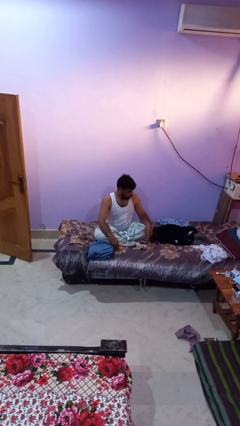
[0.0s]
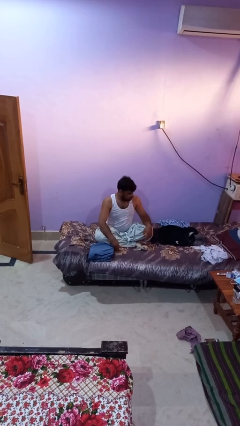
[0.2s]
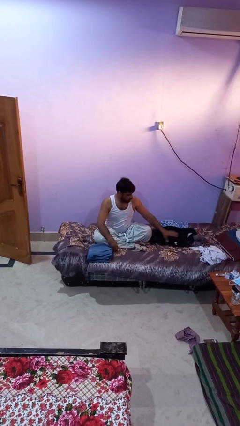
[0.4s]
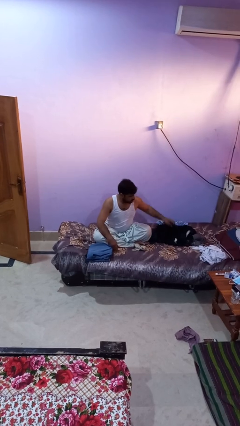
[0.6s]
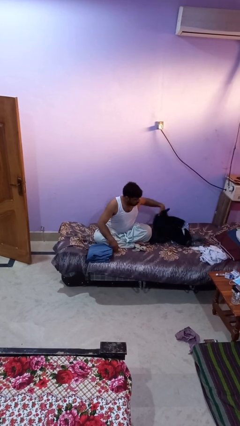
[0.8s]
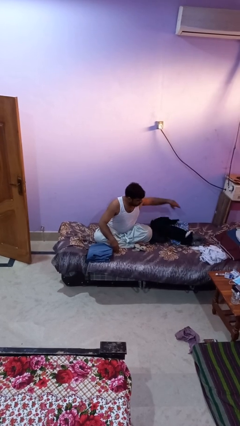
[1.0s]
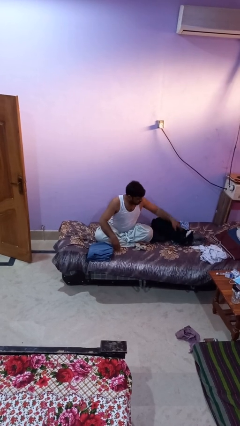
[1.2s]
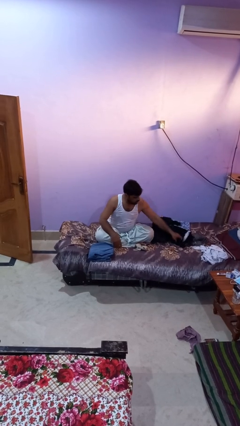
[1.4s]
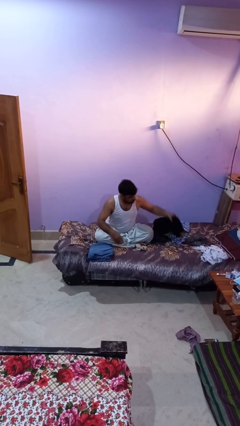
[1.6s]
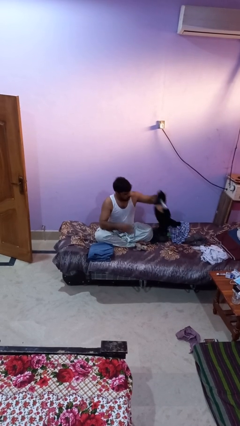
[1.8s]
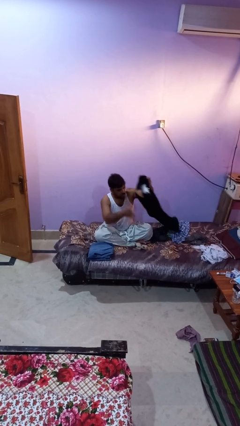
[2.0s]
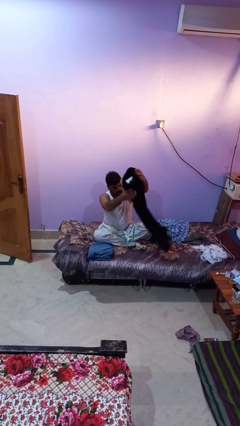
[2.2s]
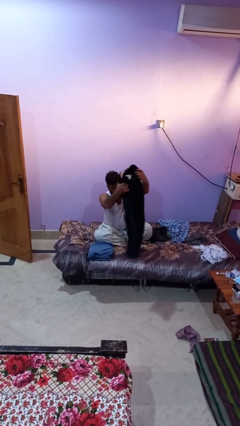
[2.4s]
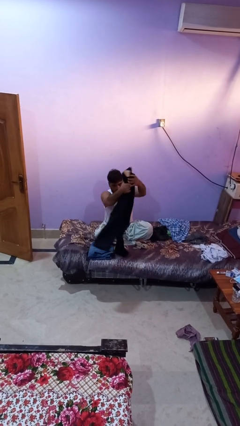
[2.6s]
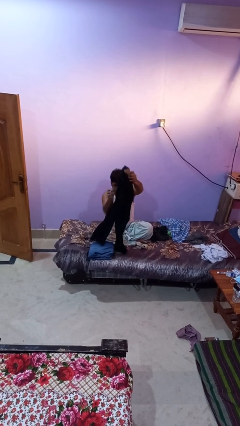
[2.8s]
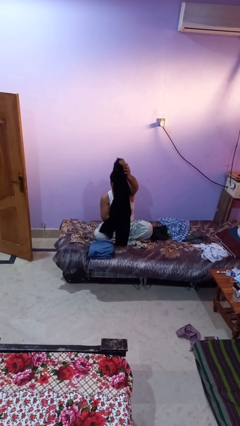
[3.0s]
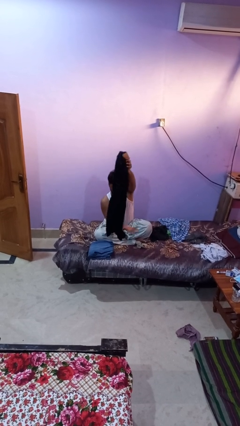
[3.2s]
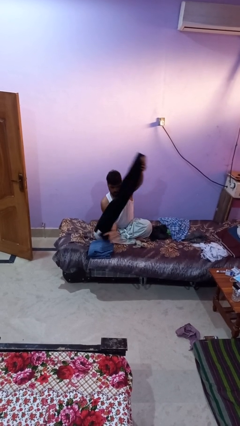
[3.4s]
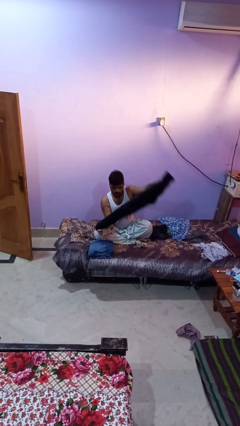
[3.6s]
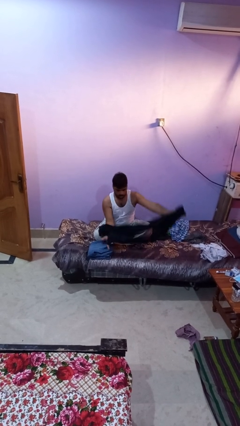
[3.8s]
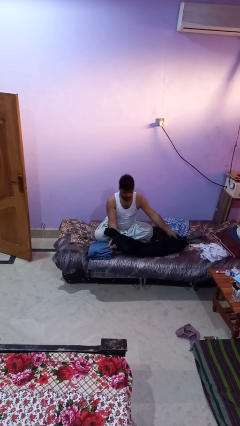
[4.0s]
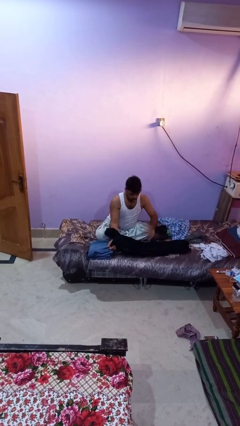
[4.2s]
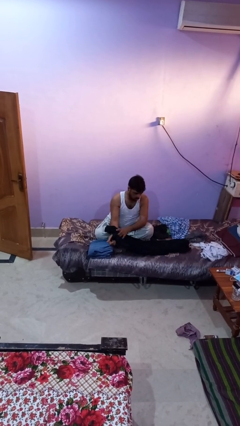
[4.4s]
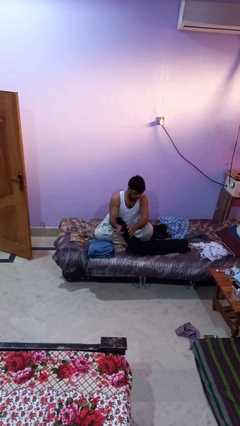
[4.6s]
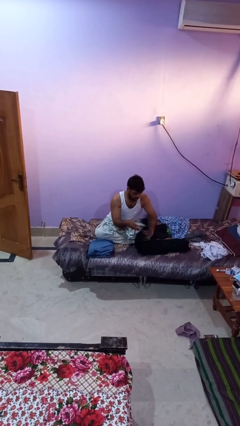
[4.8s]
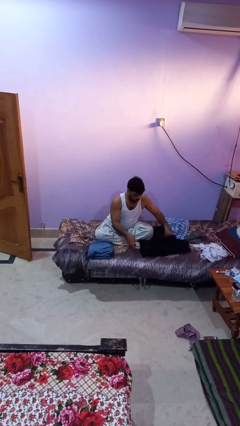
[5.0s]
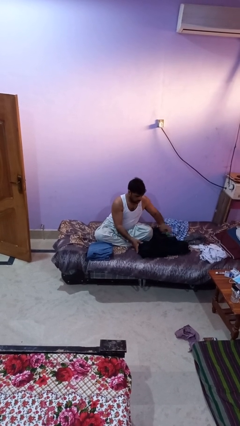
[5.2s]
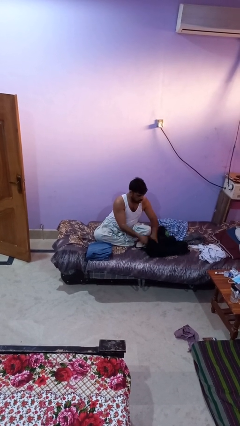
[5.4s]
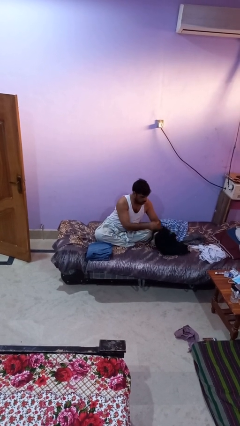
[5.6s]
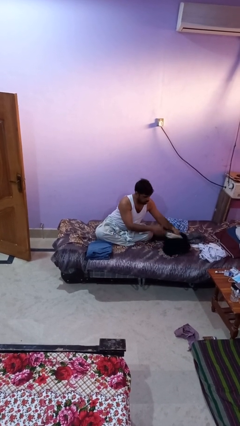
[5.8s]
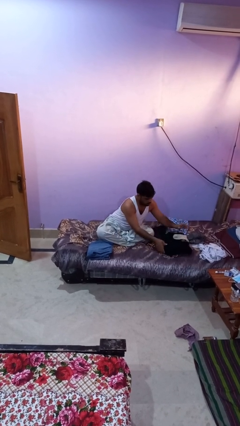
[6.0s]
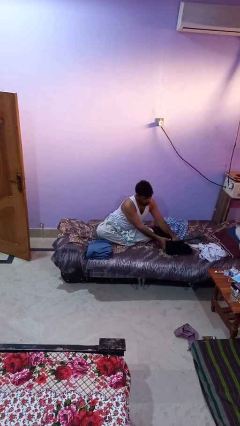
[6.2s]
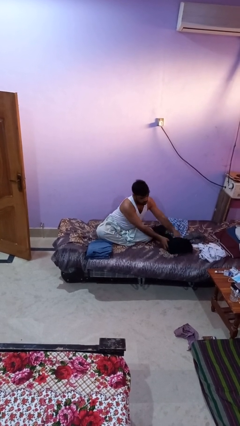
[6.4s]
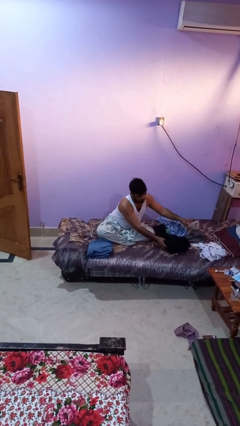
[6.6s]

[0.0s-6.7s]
person folds pants

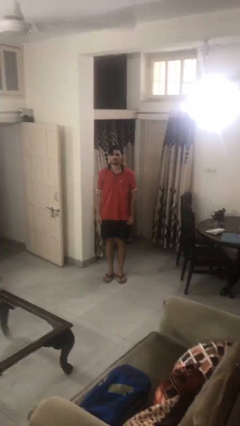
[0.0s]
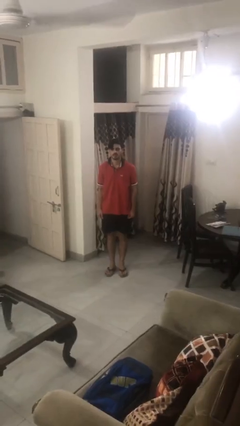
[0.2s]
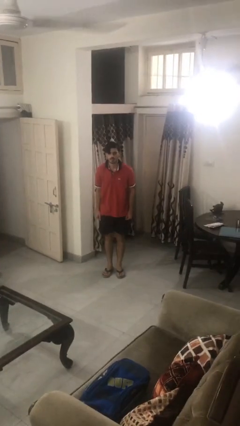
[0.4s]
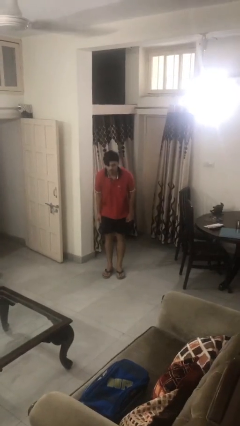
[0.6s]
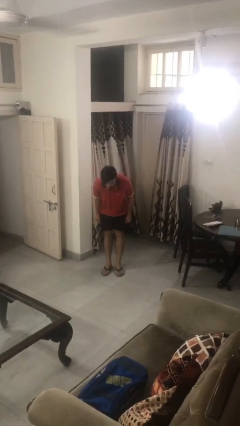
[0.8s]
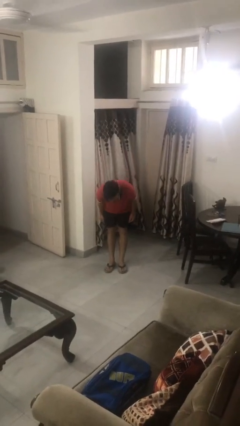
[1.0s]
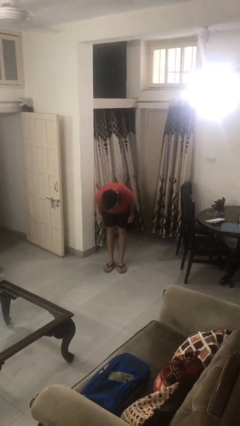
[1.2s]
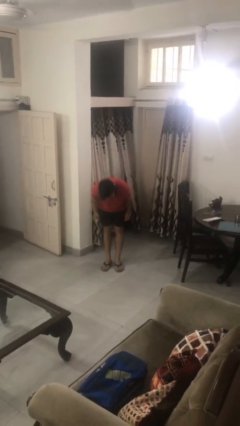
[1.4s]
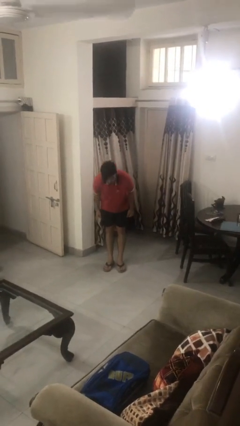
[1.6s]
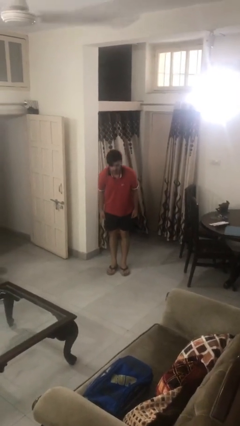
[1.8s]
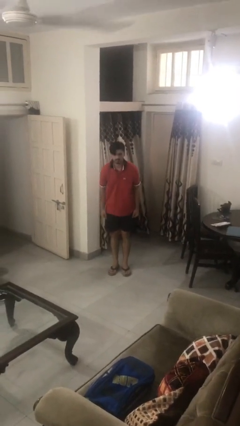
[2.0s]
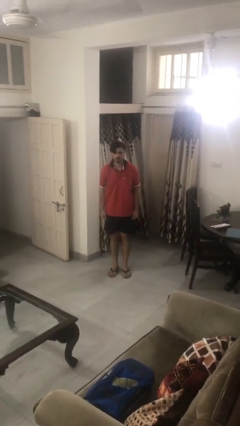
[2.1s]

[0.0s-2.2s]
person bows

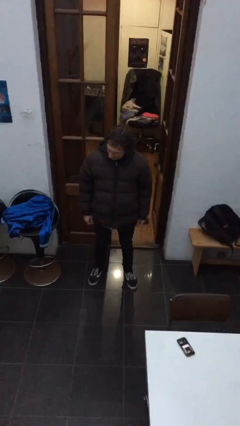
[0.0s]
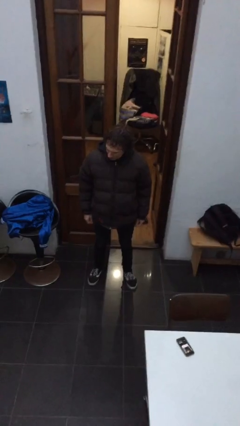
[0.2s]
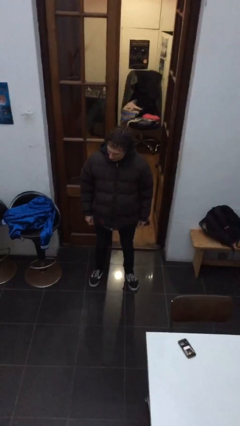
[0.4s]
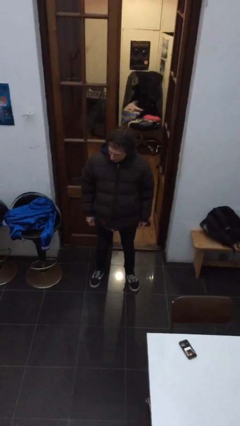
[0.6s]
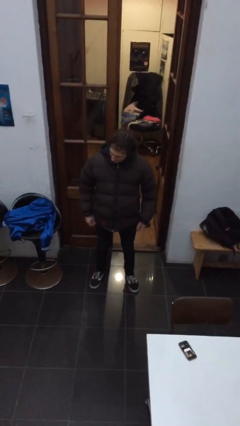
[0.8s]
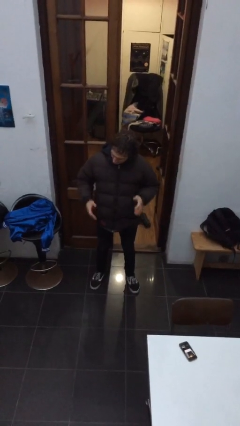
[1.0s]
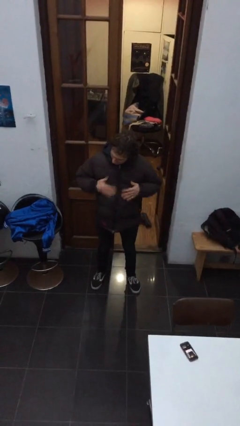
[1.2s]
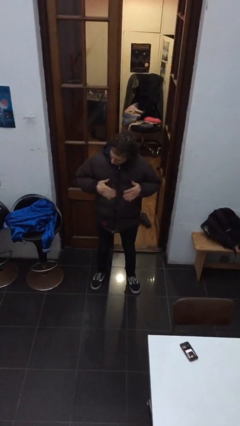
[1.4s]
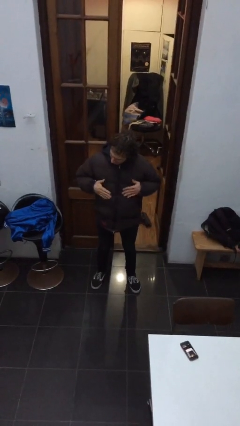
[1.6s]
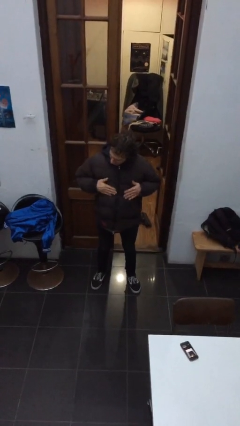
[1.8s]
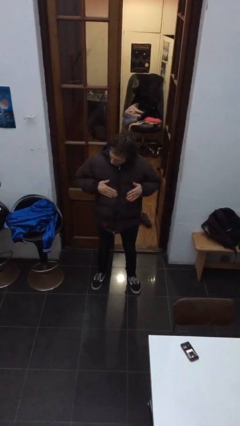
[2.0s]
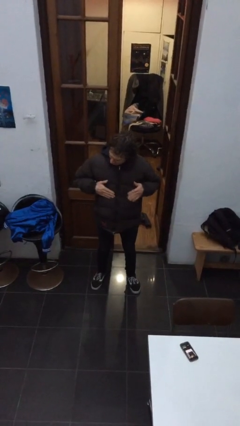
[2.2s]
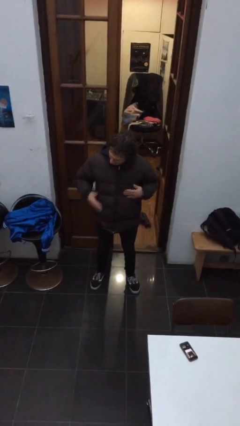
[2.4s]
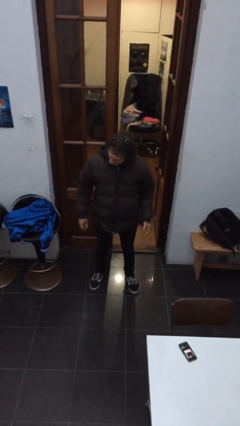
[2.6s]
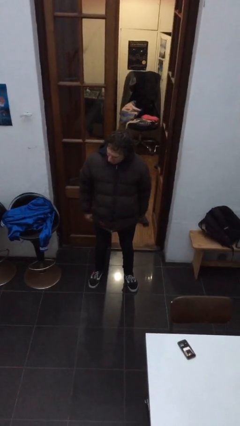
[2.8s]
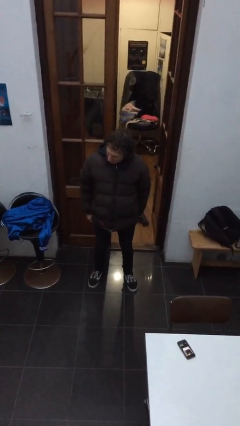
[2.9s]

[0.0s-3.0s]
person drums on chest

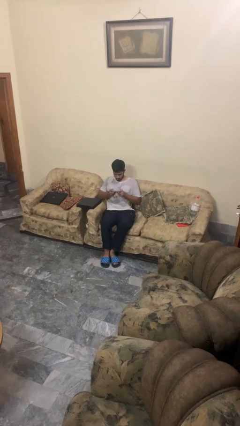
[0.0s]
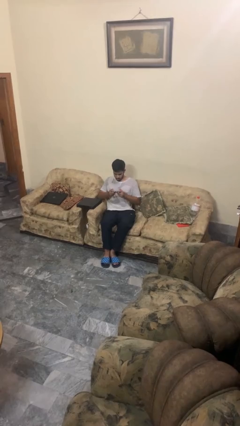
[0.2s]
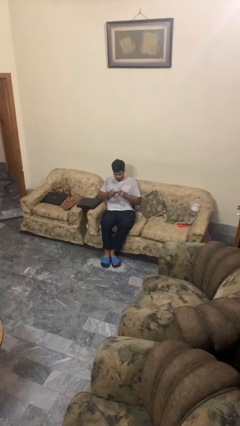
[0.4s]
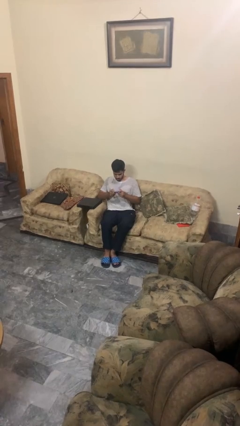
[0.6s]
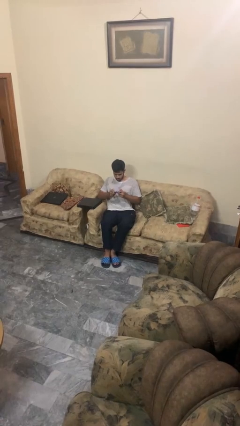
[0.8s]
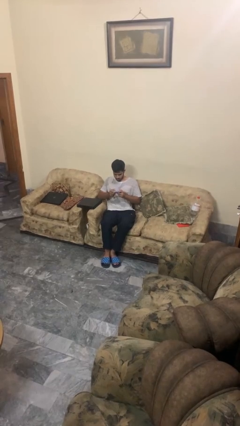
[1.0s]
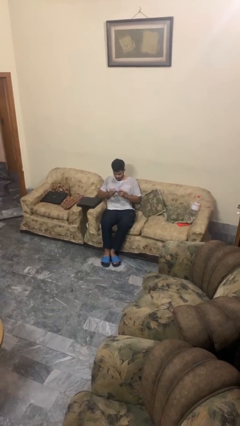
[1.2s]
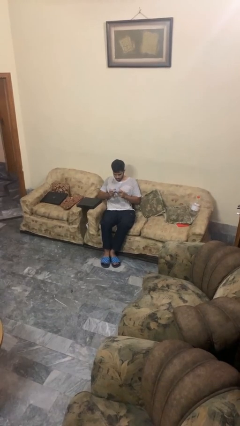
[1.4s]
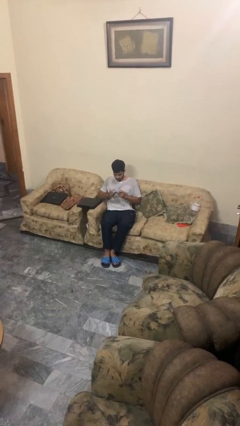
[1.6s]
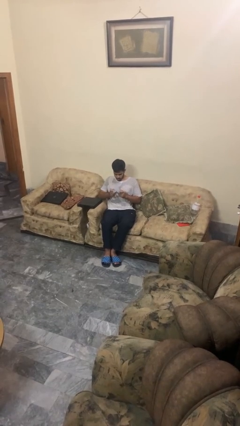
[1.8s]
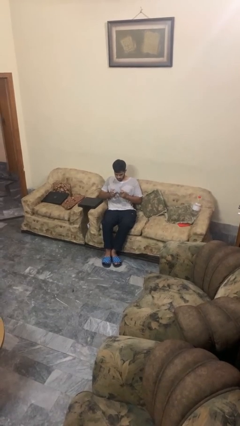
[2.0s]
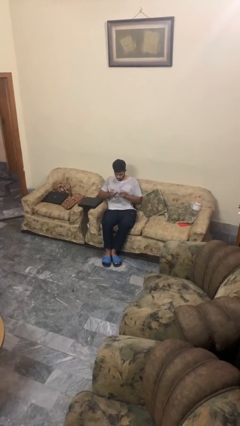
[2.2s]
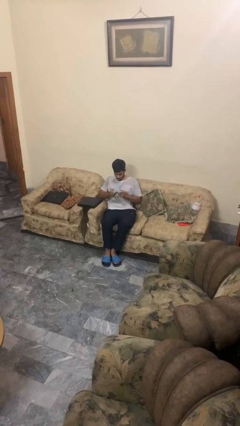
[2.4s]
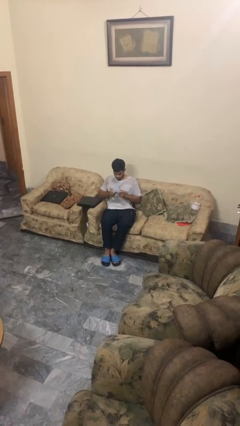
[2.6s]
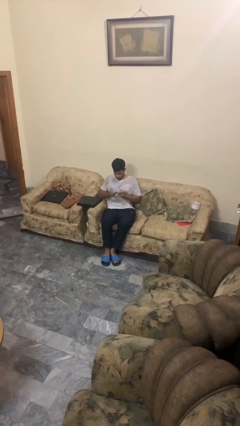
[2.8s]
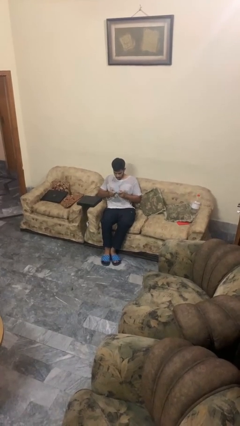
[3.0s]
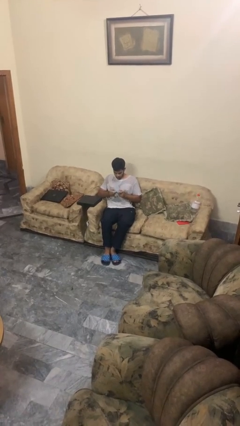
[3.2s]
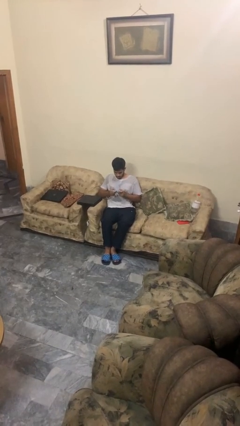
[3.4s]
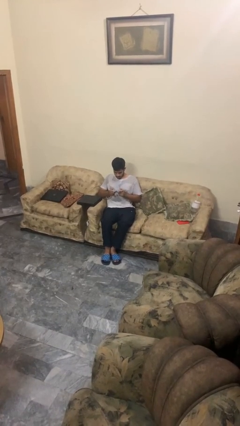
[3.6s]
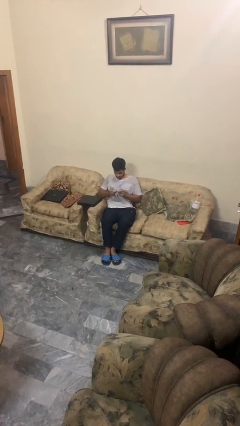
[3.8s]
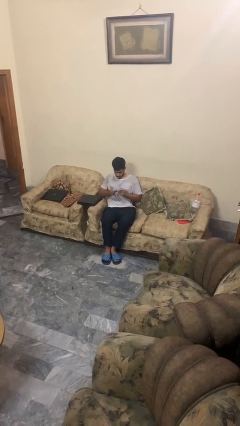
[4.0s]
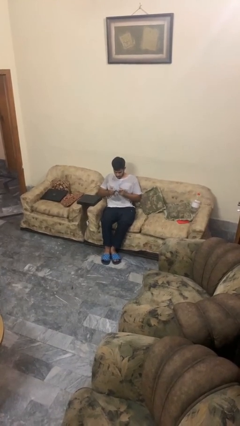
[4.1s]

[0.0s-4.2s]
person interacts with handheld game

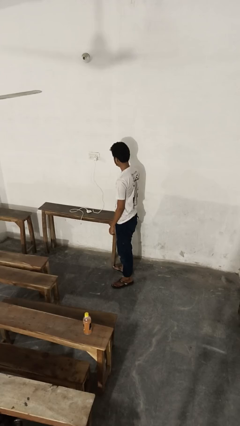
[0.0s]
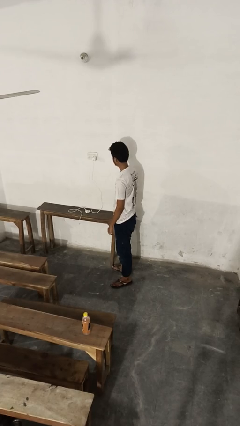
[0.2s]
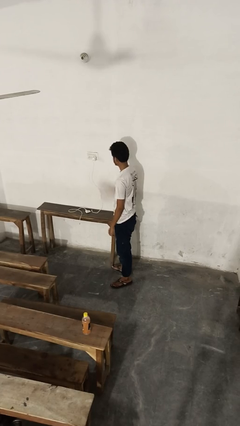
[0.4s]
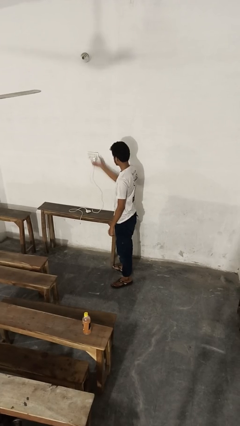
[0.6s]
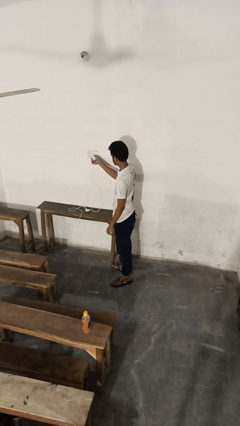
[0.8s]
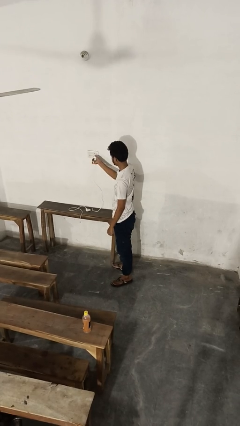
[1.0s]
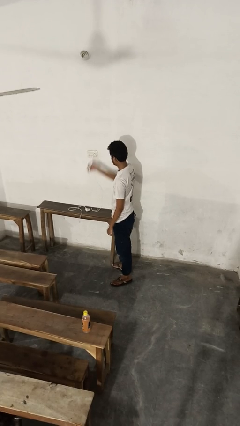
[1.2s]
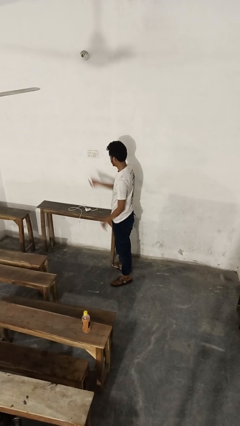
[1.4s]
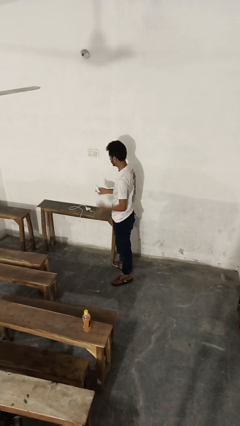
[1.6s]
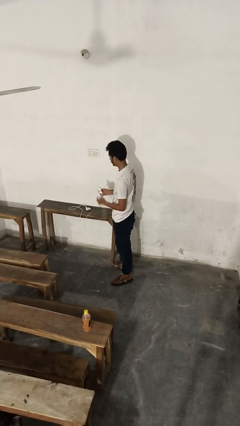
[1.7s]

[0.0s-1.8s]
person unplugs from electrical socket

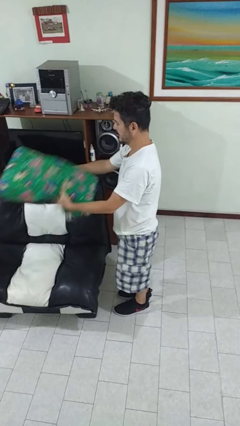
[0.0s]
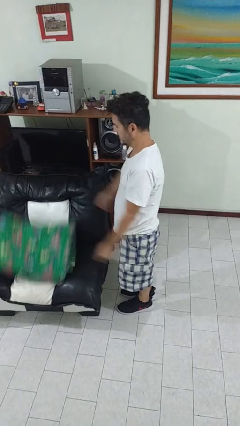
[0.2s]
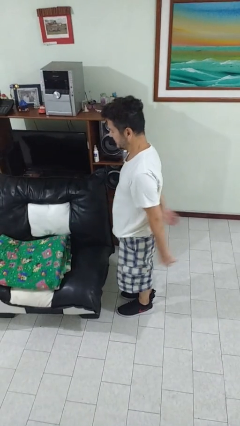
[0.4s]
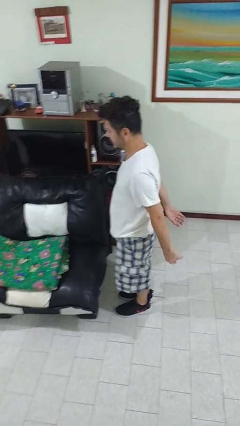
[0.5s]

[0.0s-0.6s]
person puts down object on couch
